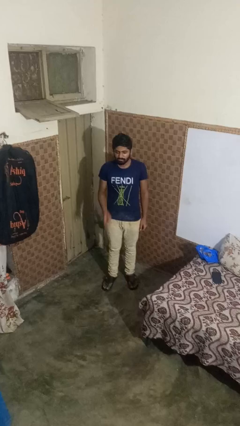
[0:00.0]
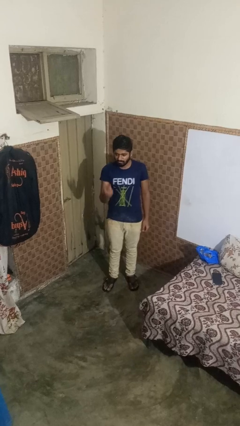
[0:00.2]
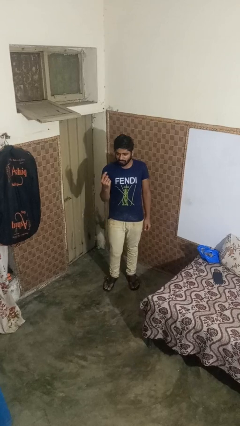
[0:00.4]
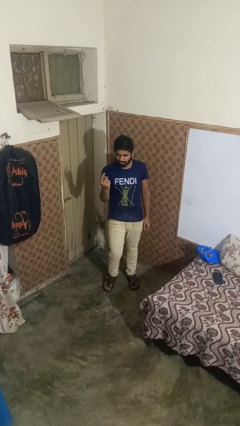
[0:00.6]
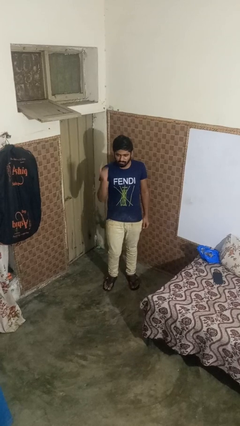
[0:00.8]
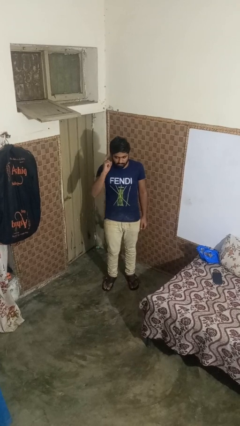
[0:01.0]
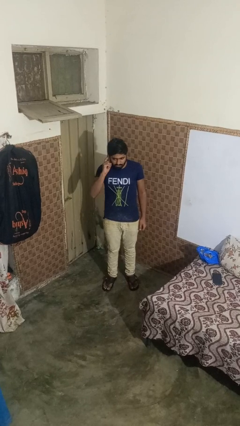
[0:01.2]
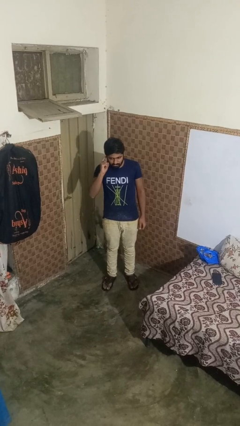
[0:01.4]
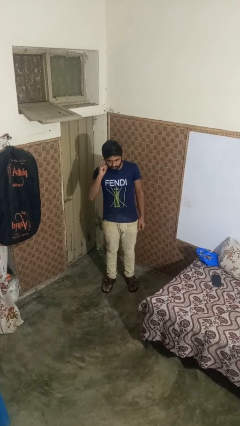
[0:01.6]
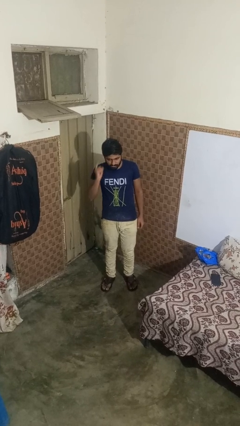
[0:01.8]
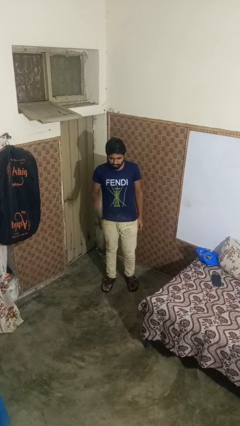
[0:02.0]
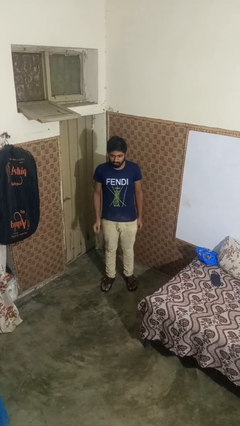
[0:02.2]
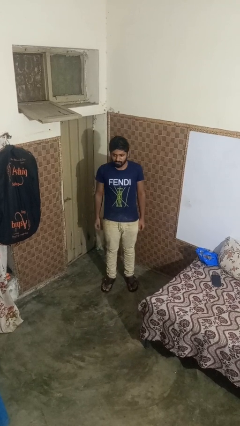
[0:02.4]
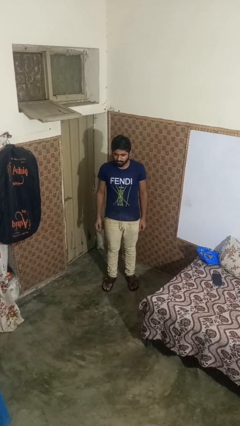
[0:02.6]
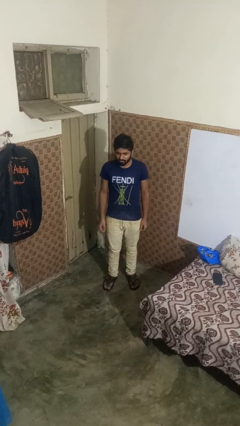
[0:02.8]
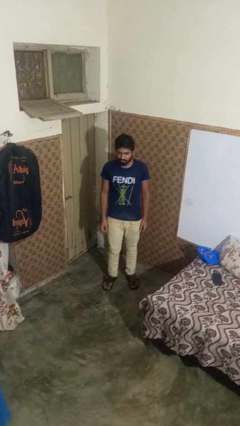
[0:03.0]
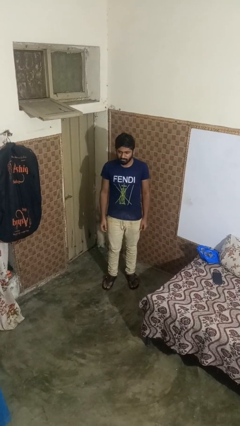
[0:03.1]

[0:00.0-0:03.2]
person gestures listen closely

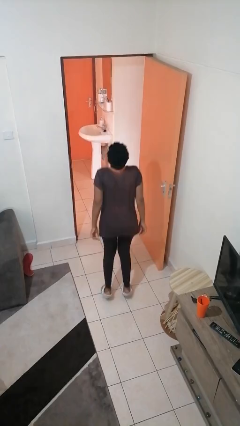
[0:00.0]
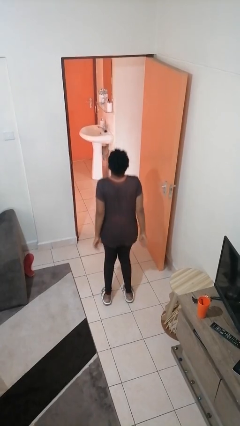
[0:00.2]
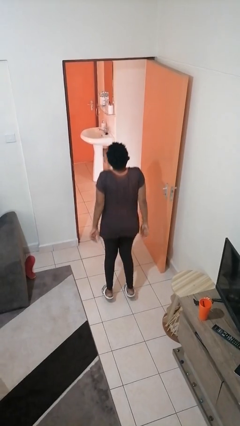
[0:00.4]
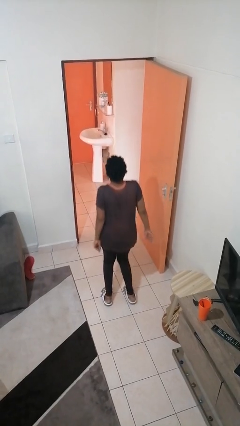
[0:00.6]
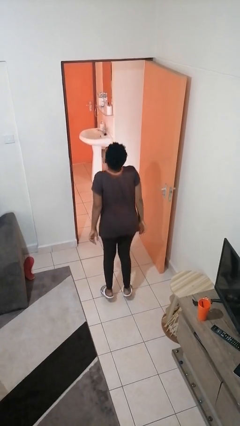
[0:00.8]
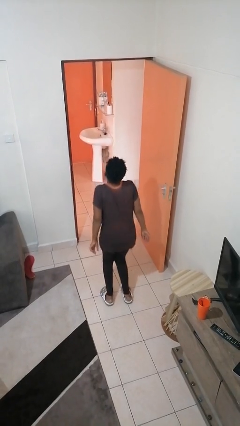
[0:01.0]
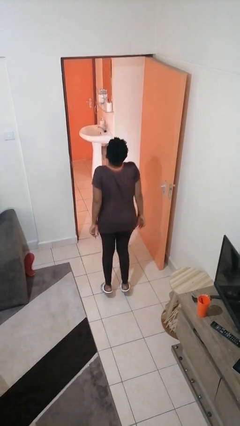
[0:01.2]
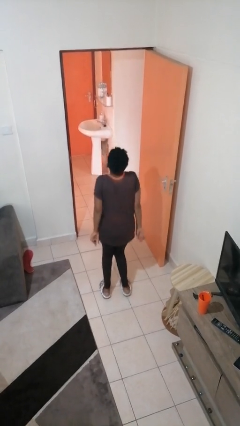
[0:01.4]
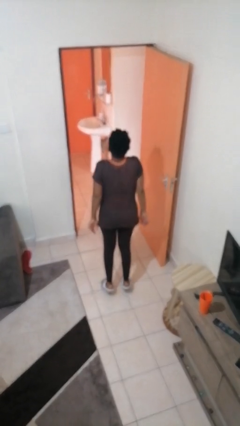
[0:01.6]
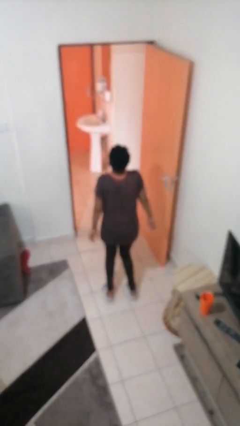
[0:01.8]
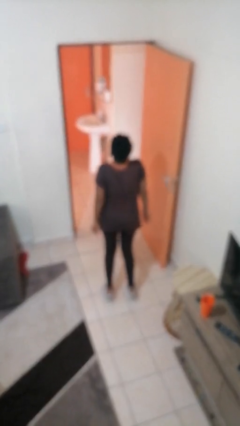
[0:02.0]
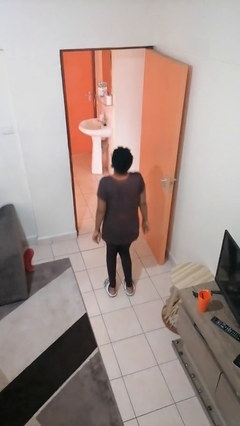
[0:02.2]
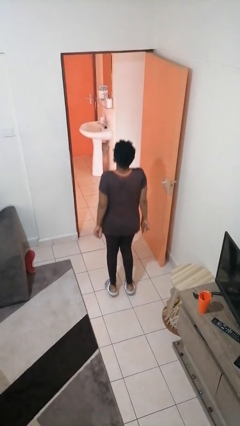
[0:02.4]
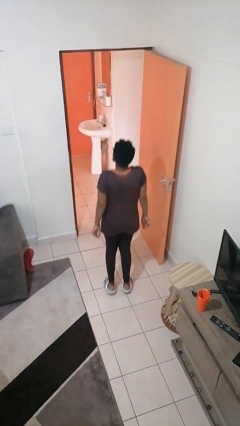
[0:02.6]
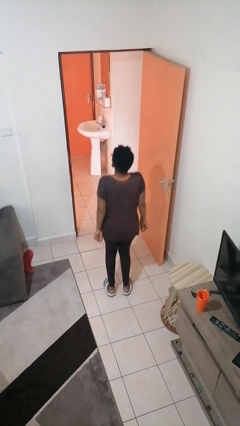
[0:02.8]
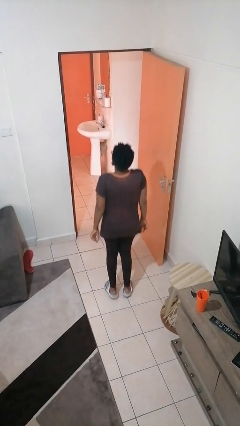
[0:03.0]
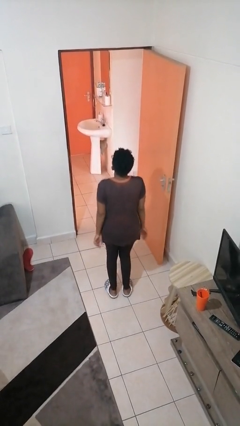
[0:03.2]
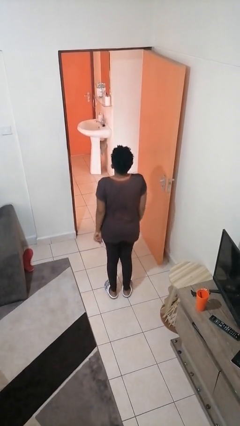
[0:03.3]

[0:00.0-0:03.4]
person jumps

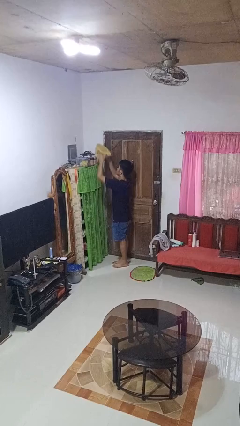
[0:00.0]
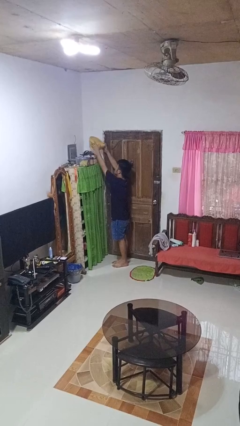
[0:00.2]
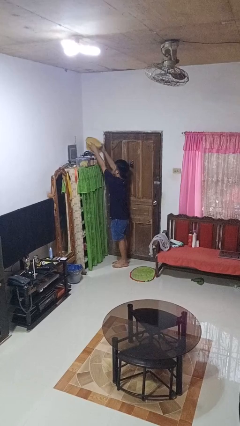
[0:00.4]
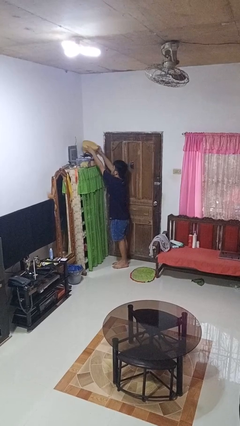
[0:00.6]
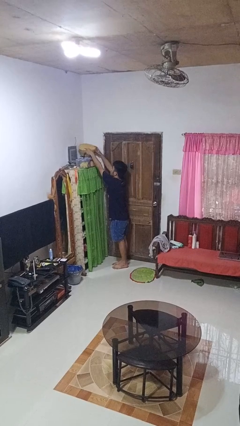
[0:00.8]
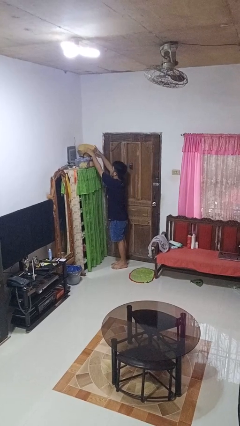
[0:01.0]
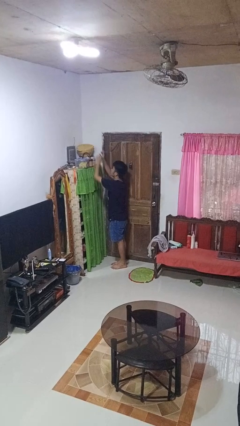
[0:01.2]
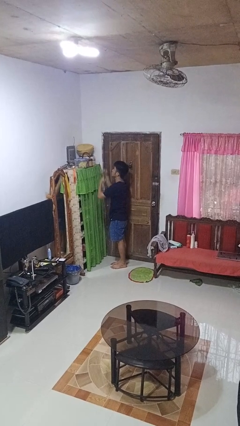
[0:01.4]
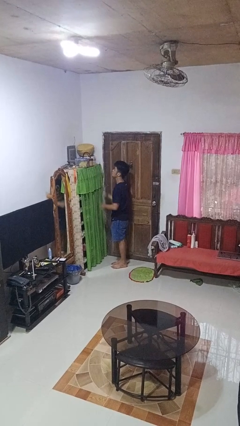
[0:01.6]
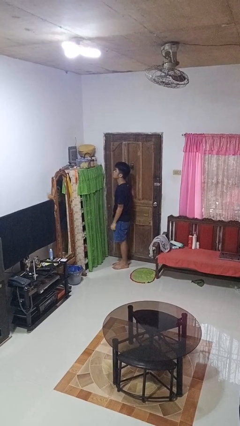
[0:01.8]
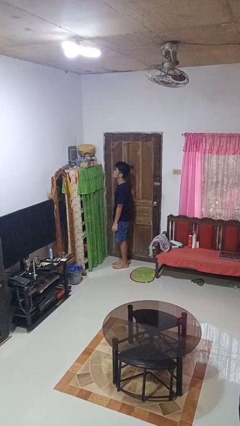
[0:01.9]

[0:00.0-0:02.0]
person puts down object on shelf

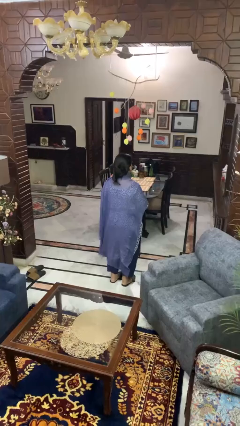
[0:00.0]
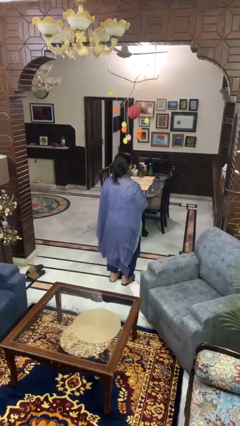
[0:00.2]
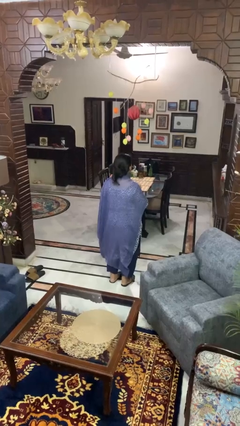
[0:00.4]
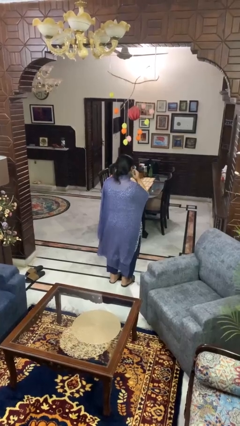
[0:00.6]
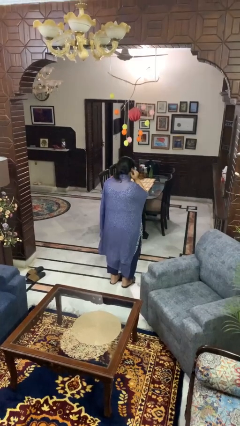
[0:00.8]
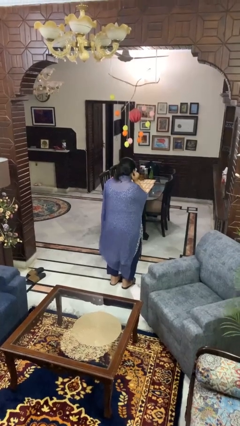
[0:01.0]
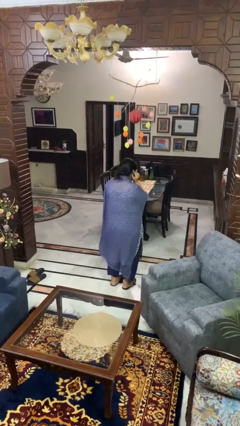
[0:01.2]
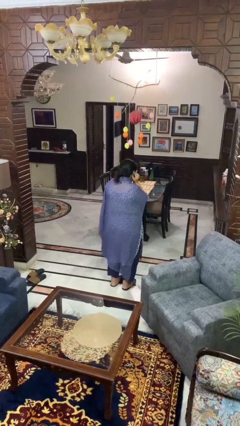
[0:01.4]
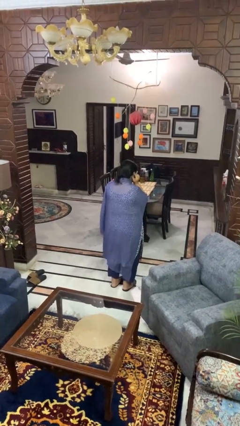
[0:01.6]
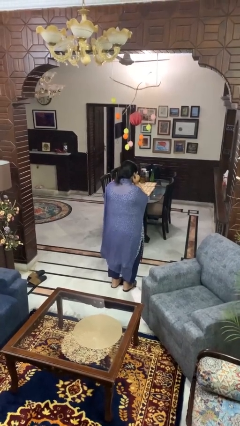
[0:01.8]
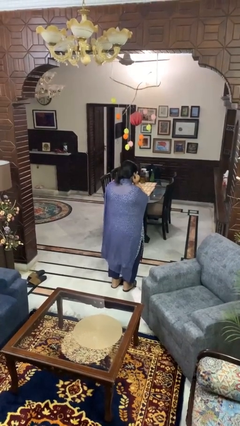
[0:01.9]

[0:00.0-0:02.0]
person puts fingers in ear

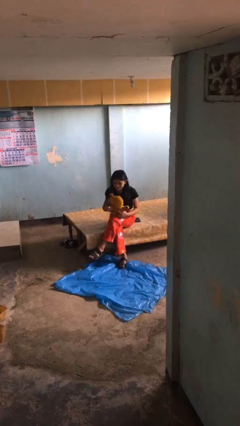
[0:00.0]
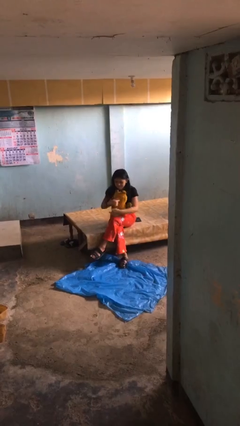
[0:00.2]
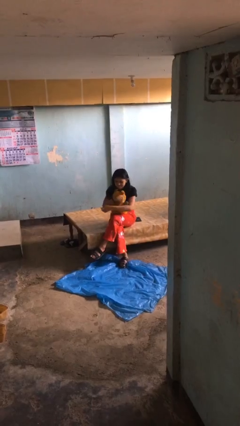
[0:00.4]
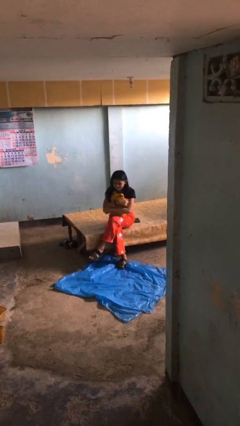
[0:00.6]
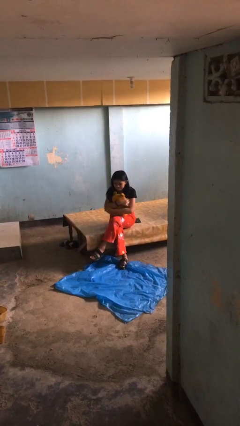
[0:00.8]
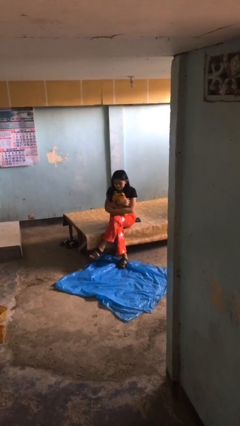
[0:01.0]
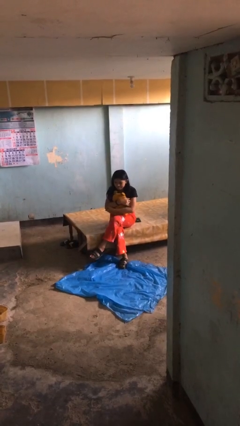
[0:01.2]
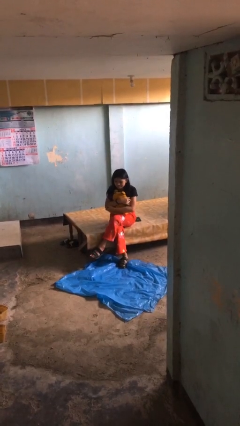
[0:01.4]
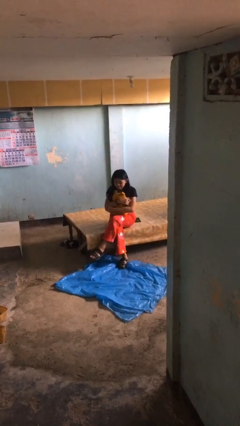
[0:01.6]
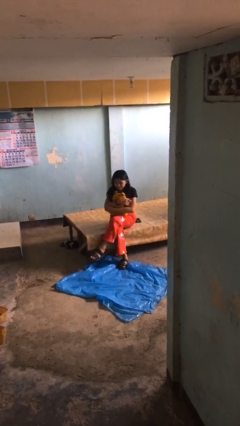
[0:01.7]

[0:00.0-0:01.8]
person hugs stuffed animal

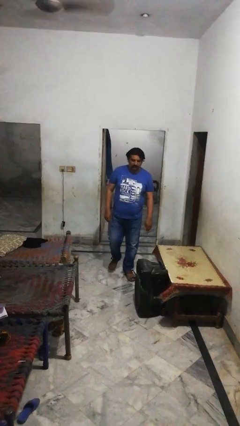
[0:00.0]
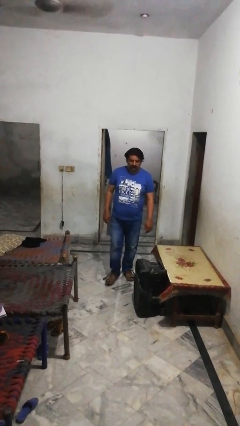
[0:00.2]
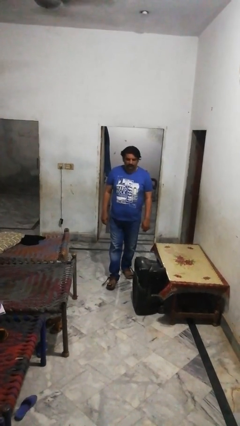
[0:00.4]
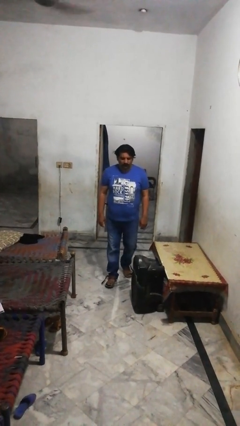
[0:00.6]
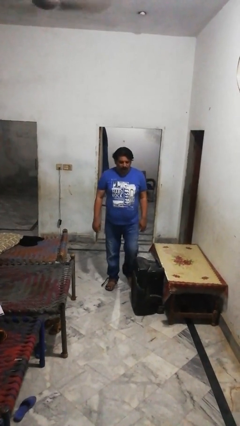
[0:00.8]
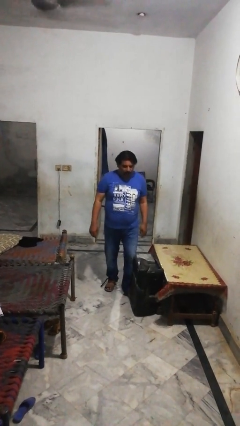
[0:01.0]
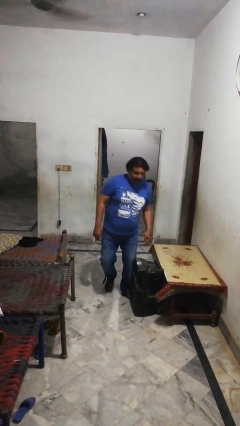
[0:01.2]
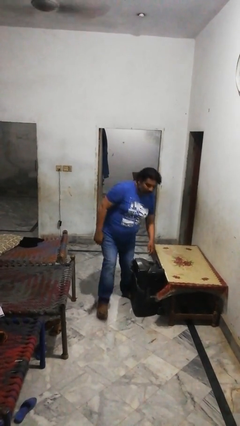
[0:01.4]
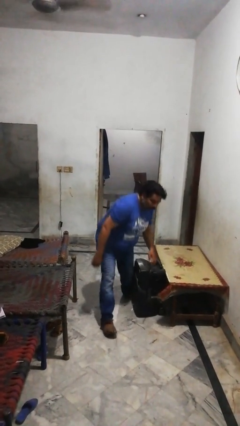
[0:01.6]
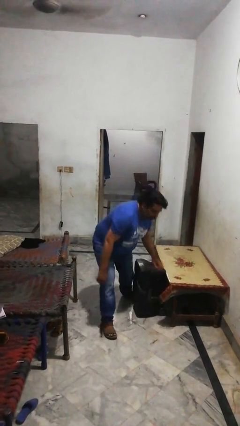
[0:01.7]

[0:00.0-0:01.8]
person trips on object on floor

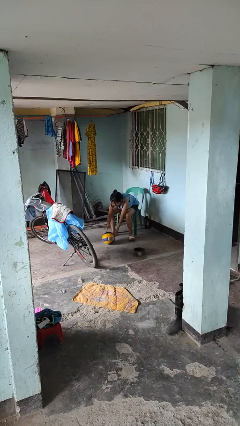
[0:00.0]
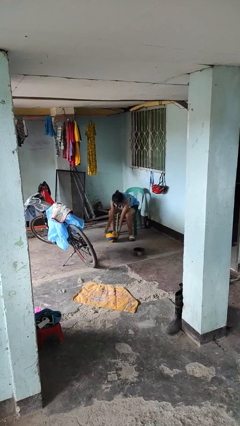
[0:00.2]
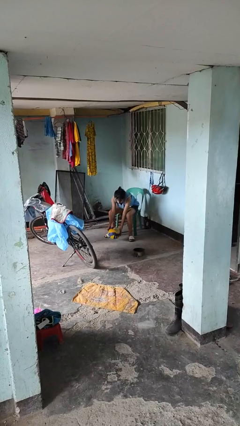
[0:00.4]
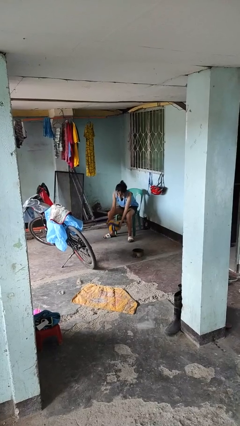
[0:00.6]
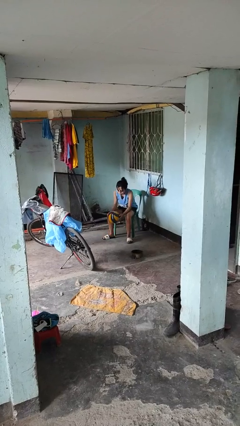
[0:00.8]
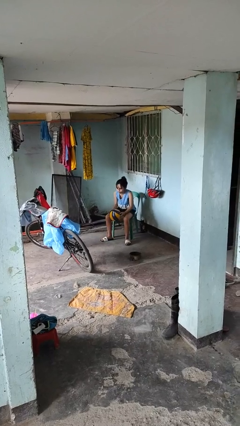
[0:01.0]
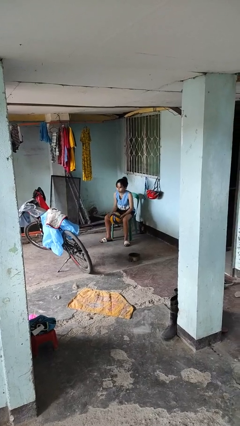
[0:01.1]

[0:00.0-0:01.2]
person picks up object from floor

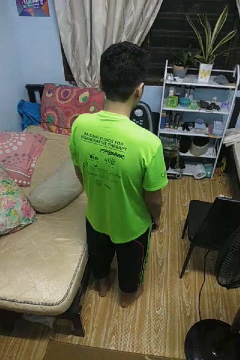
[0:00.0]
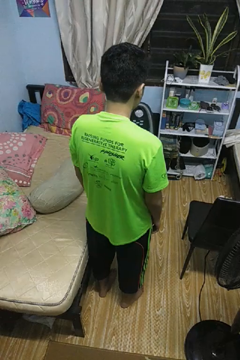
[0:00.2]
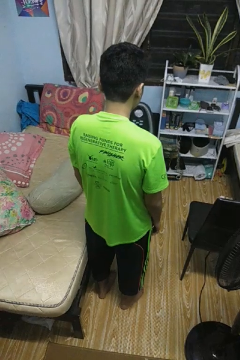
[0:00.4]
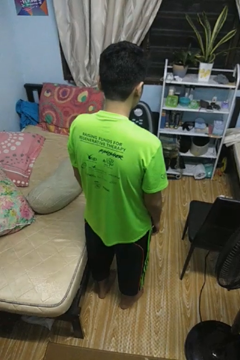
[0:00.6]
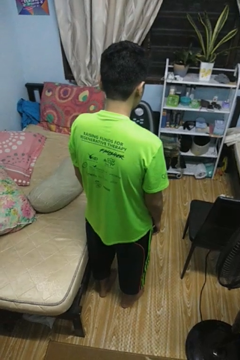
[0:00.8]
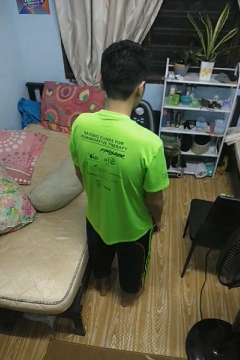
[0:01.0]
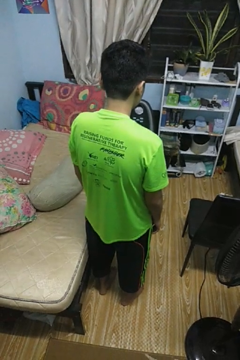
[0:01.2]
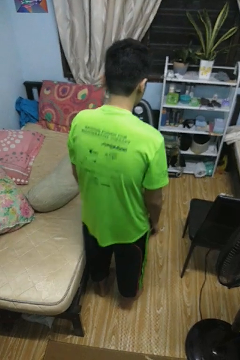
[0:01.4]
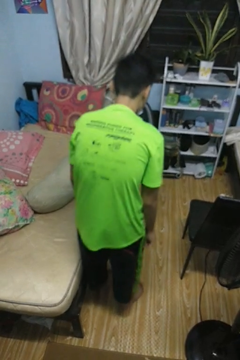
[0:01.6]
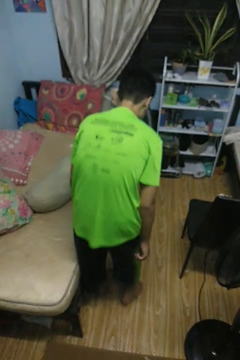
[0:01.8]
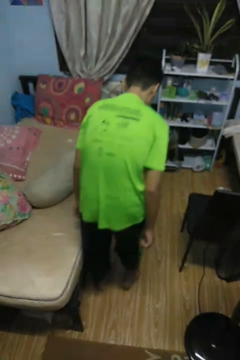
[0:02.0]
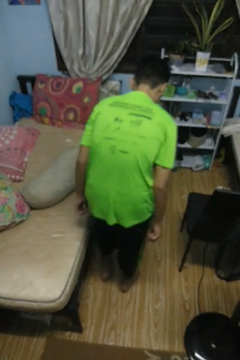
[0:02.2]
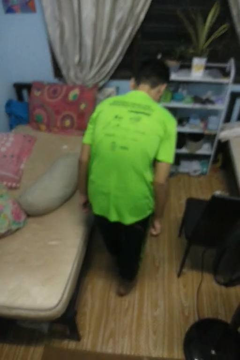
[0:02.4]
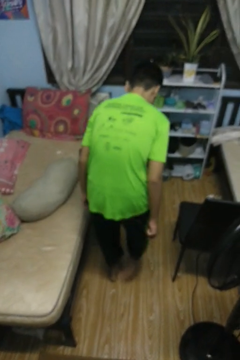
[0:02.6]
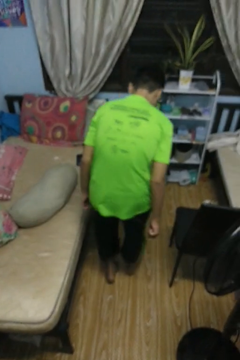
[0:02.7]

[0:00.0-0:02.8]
person walks tiptoe
